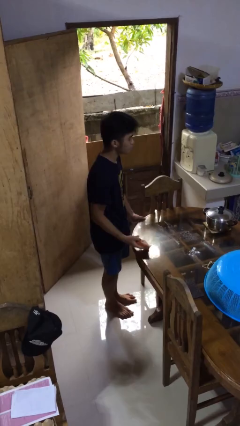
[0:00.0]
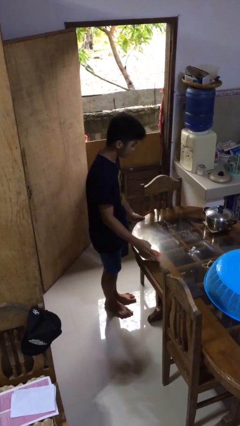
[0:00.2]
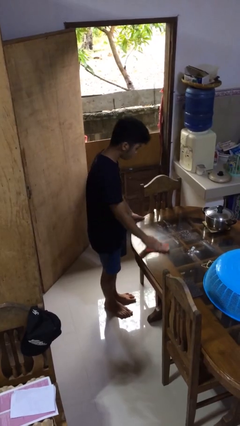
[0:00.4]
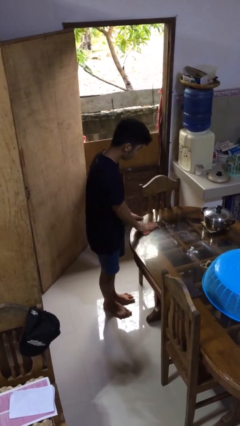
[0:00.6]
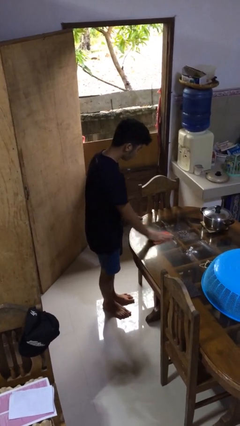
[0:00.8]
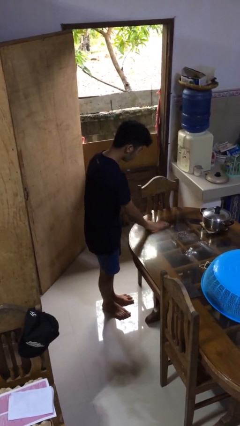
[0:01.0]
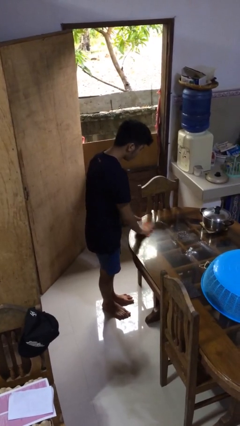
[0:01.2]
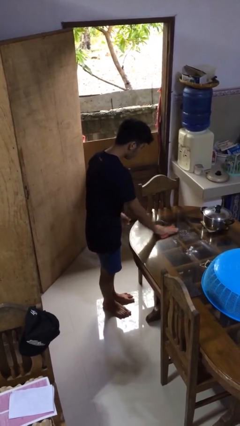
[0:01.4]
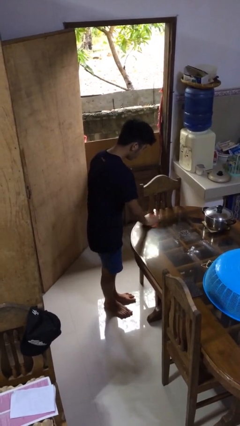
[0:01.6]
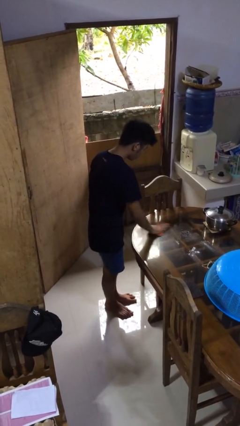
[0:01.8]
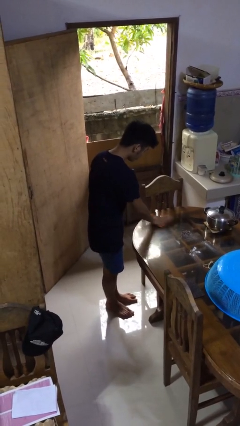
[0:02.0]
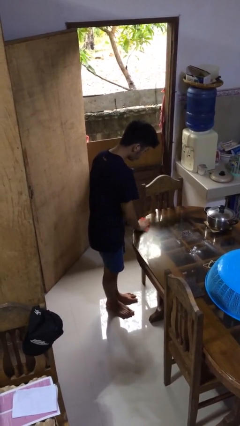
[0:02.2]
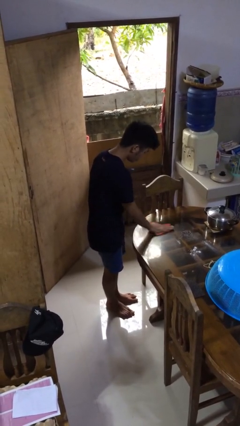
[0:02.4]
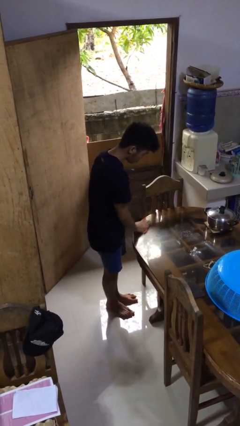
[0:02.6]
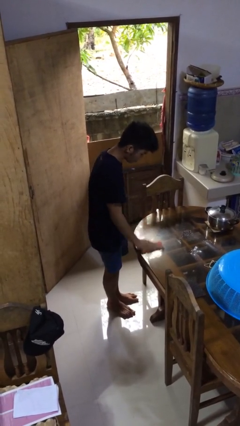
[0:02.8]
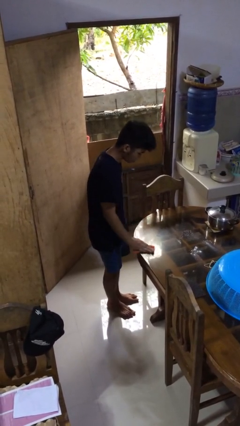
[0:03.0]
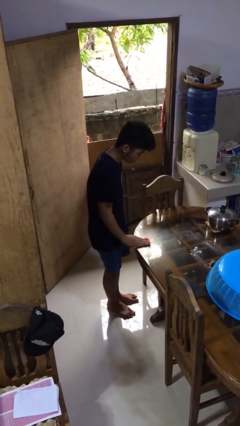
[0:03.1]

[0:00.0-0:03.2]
person cleans table with rag

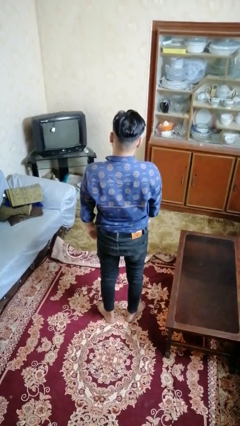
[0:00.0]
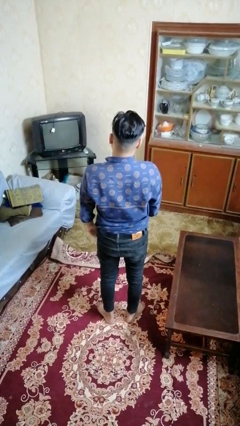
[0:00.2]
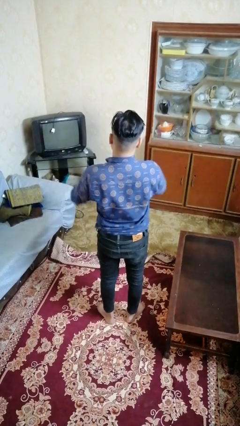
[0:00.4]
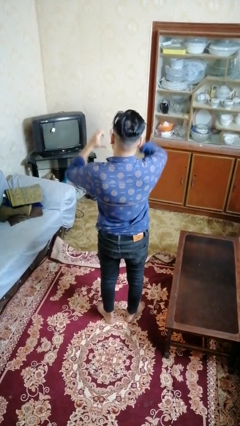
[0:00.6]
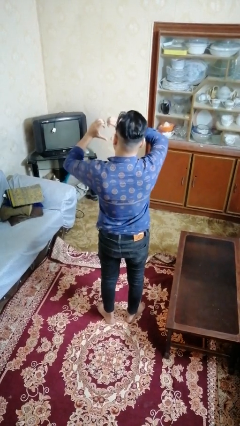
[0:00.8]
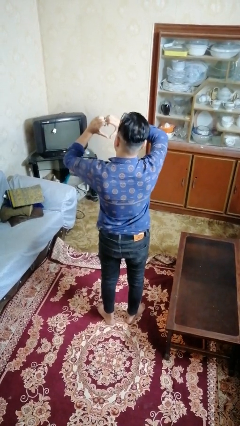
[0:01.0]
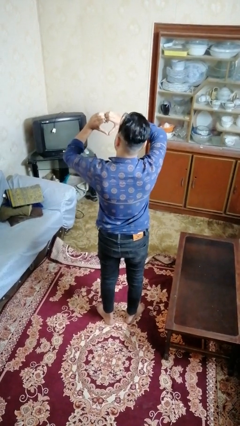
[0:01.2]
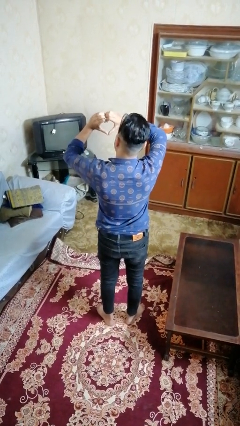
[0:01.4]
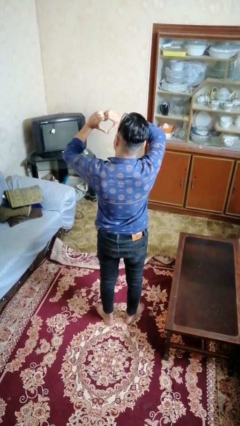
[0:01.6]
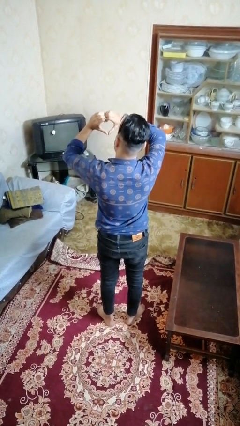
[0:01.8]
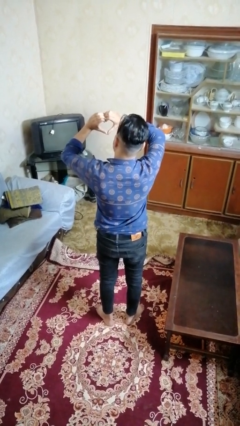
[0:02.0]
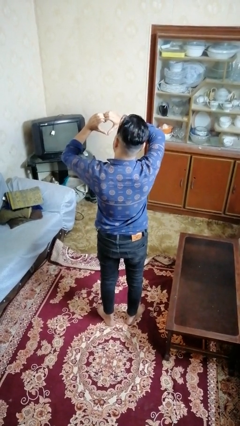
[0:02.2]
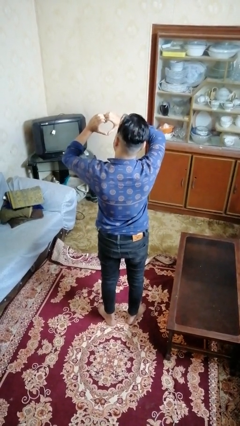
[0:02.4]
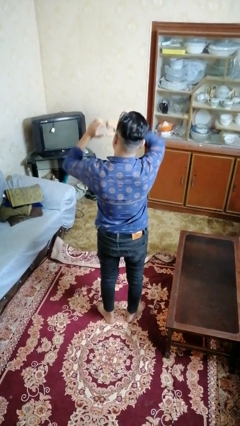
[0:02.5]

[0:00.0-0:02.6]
person gestures heart

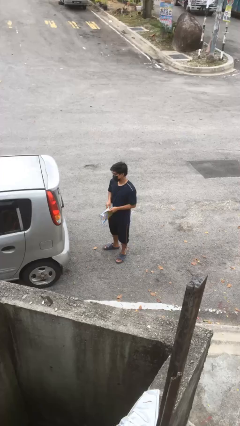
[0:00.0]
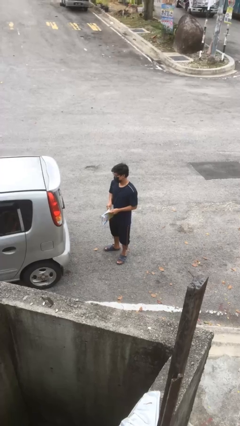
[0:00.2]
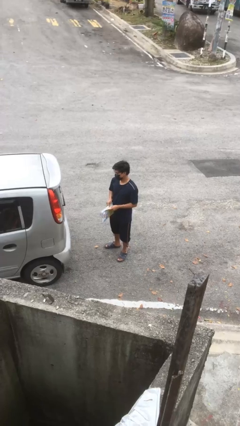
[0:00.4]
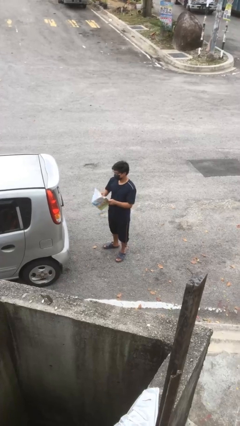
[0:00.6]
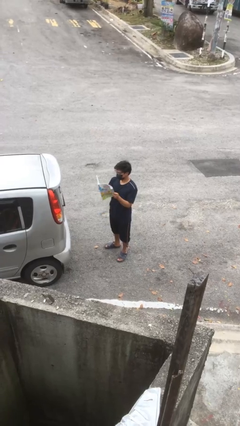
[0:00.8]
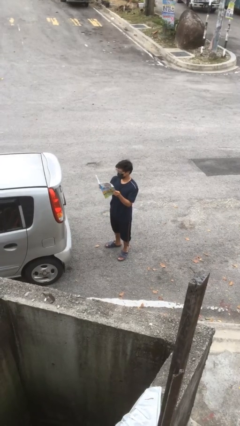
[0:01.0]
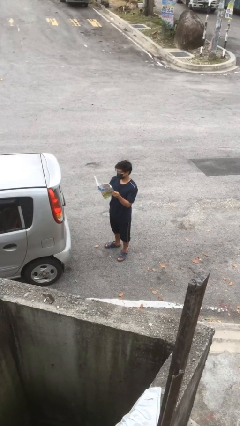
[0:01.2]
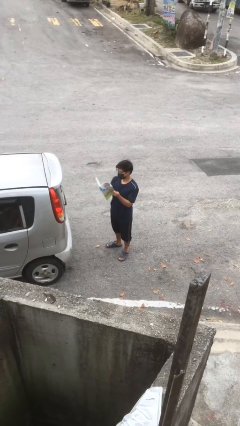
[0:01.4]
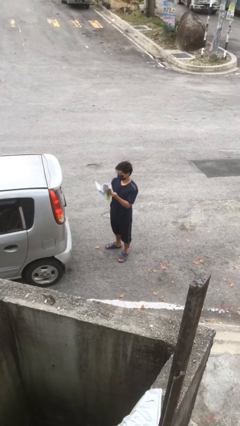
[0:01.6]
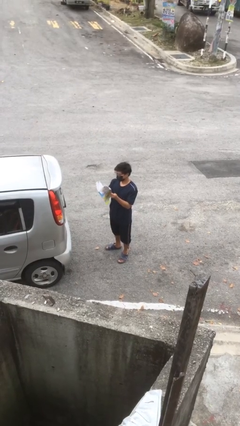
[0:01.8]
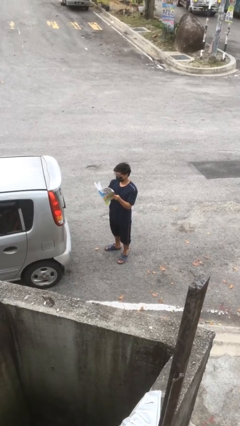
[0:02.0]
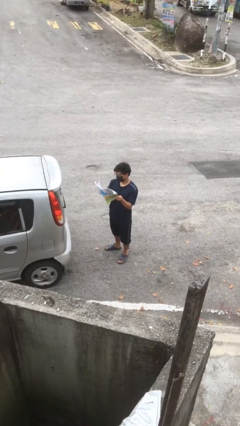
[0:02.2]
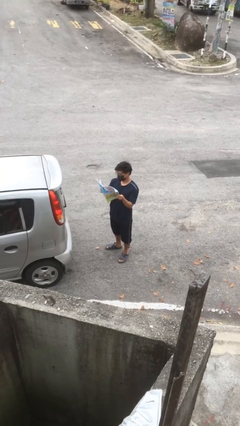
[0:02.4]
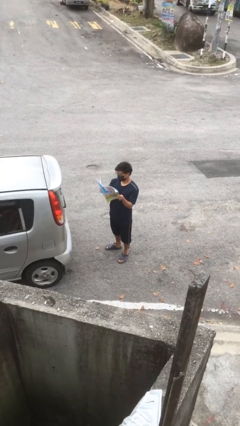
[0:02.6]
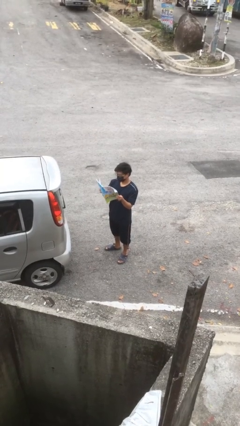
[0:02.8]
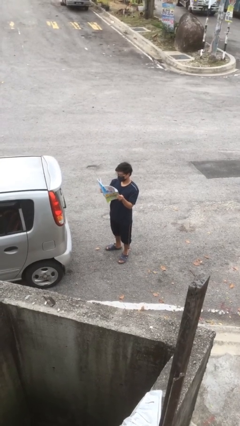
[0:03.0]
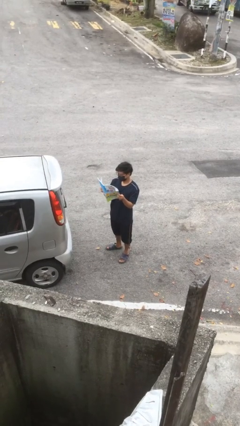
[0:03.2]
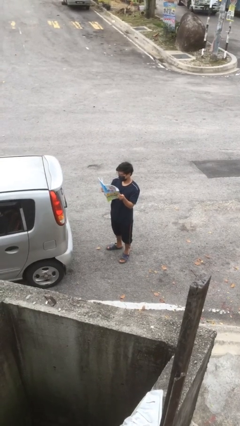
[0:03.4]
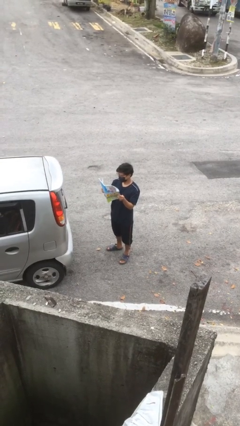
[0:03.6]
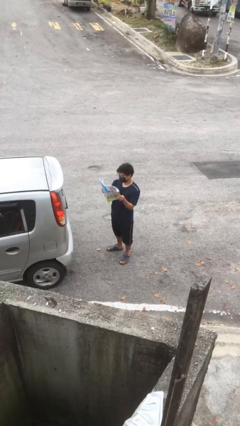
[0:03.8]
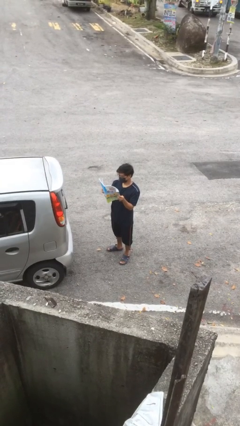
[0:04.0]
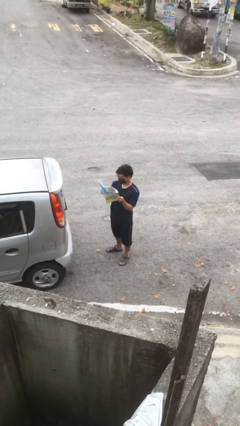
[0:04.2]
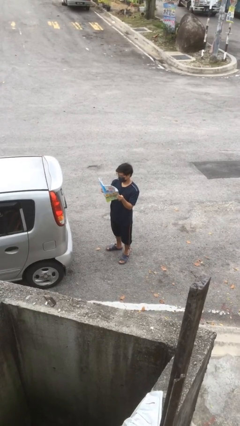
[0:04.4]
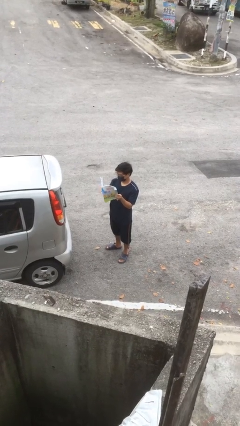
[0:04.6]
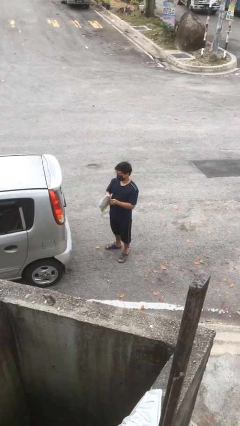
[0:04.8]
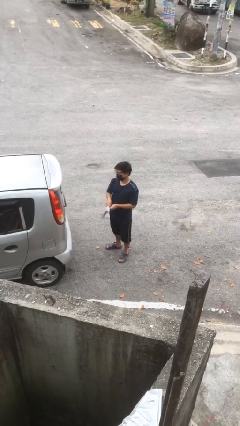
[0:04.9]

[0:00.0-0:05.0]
person reads document

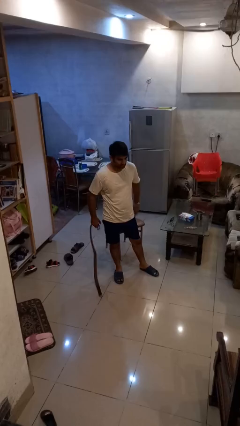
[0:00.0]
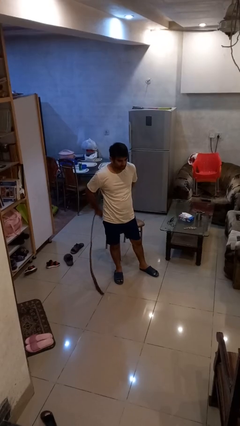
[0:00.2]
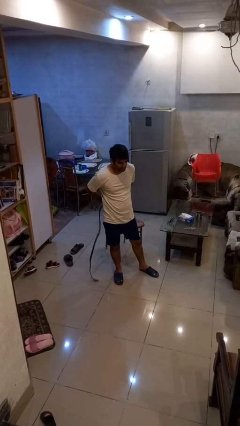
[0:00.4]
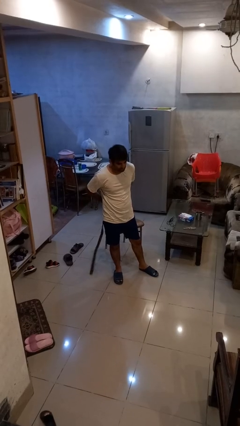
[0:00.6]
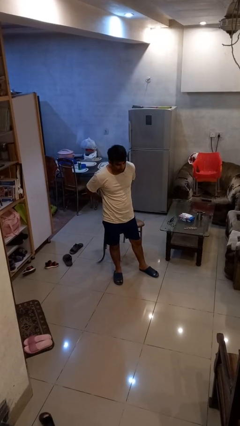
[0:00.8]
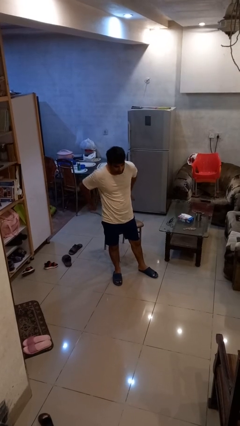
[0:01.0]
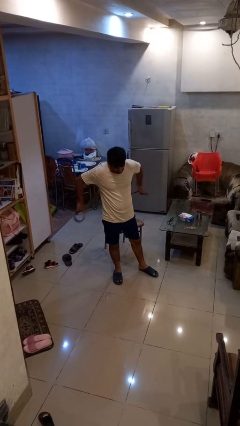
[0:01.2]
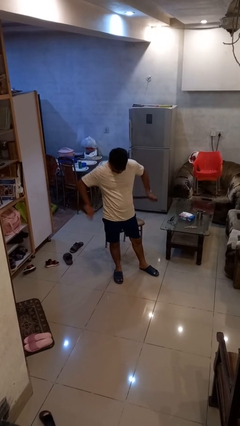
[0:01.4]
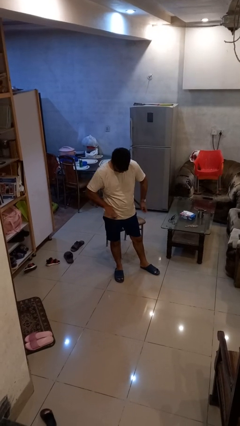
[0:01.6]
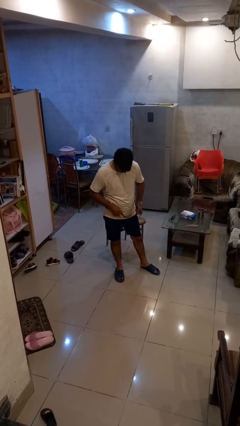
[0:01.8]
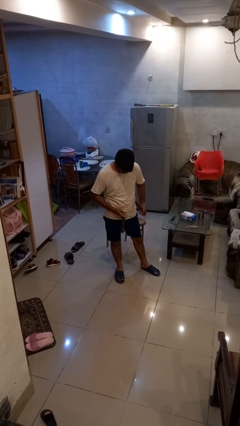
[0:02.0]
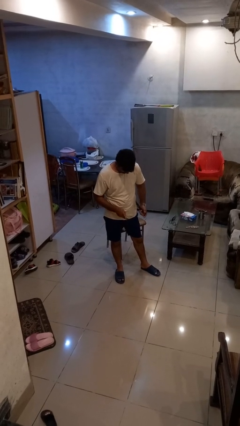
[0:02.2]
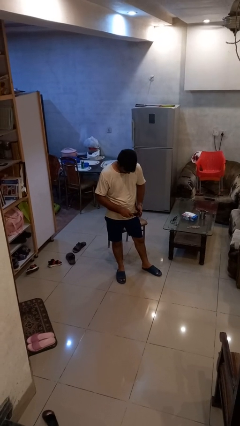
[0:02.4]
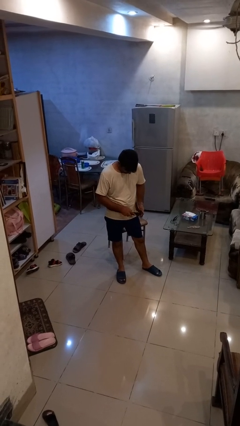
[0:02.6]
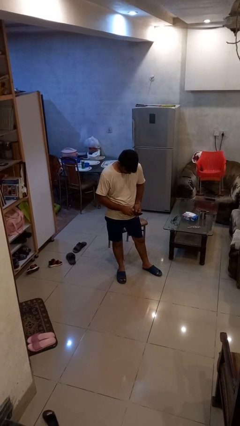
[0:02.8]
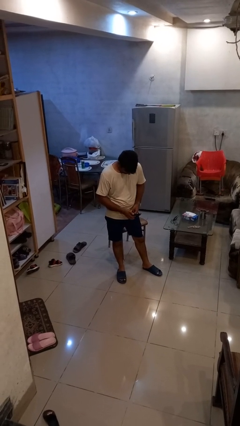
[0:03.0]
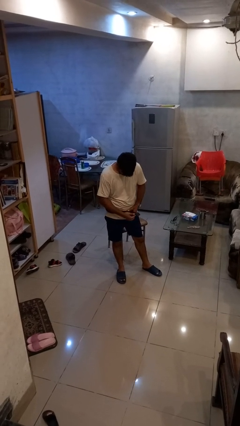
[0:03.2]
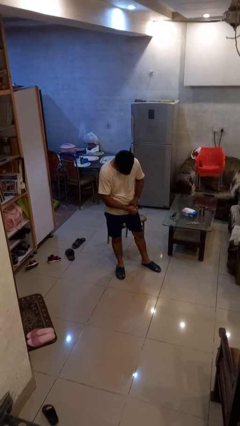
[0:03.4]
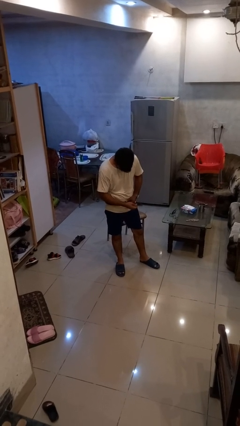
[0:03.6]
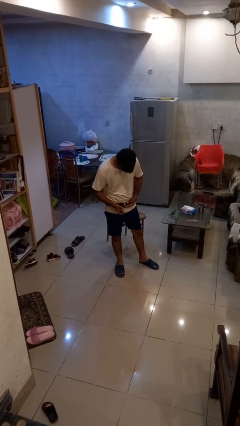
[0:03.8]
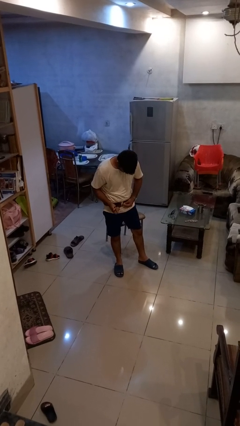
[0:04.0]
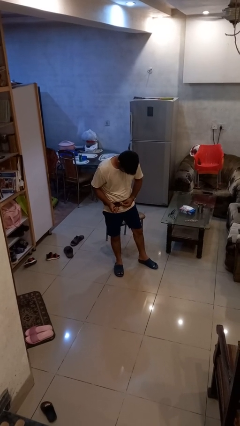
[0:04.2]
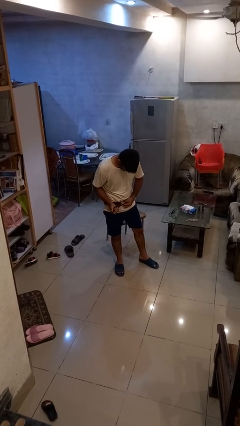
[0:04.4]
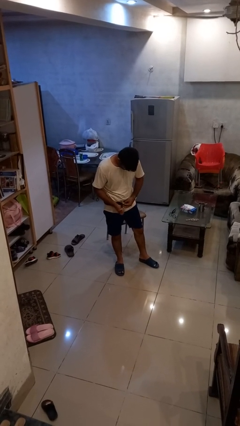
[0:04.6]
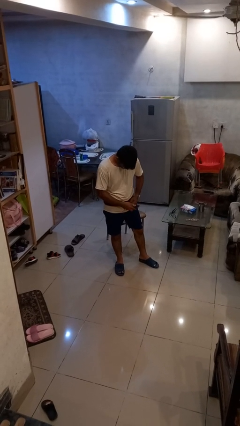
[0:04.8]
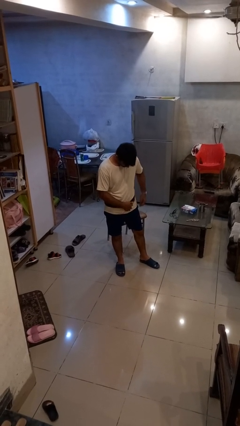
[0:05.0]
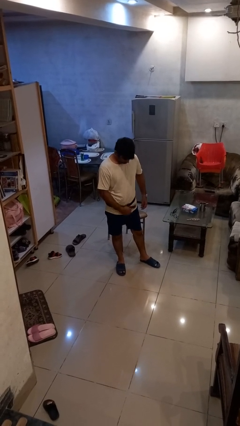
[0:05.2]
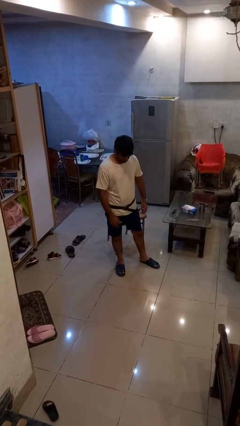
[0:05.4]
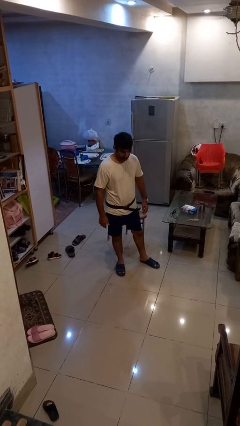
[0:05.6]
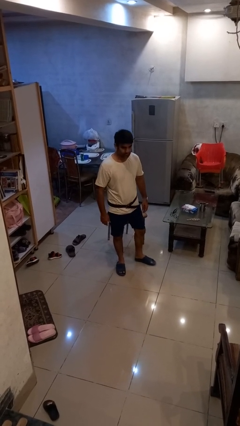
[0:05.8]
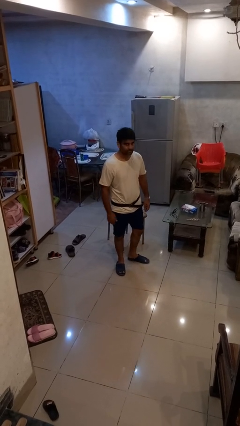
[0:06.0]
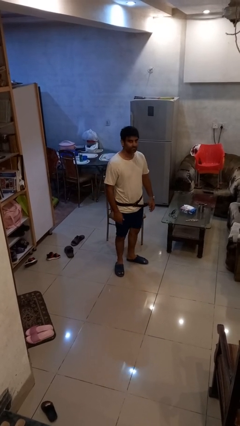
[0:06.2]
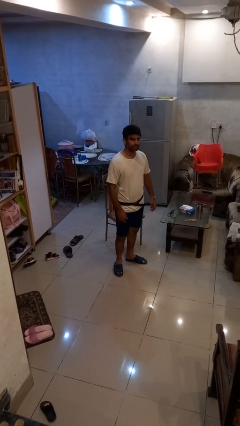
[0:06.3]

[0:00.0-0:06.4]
person puts on belt

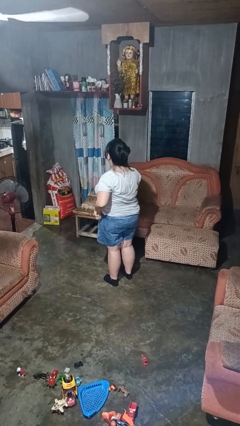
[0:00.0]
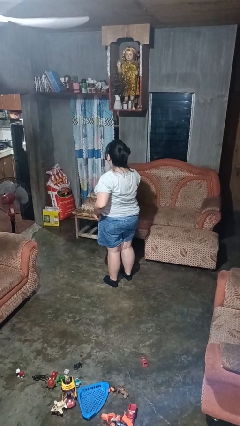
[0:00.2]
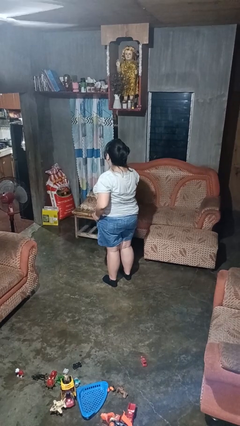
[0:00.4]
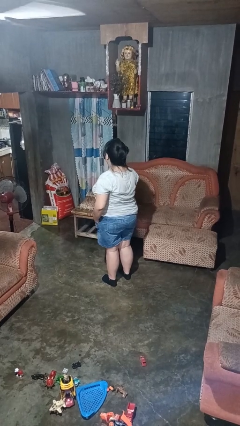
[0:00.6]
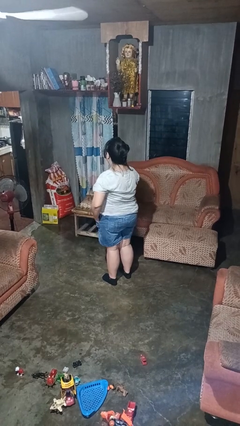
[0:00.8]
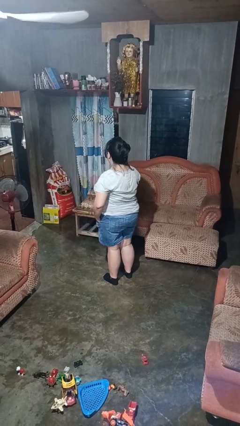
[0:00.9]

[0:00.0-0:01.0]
person puts hands in back pockets
